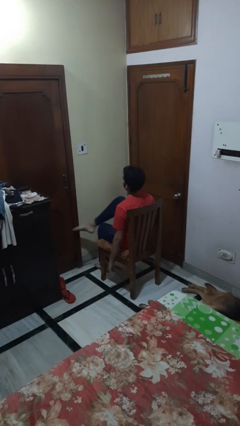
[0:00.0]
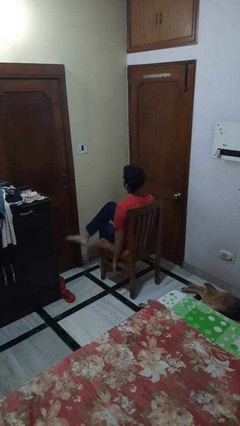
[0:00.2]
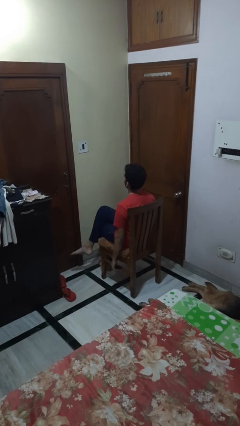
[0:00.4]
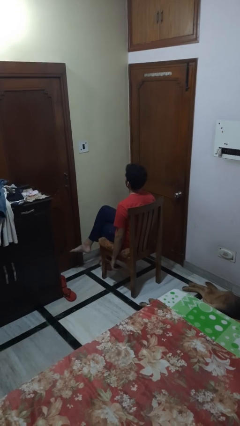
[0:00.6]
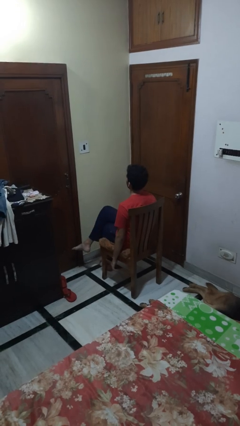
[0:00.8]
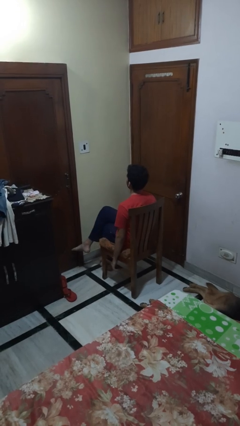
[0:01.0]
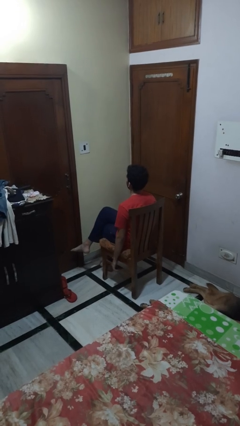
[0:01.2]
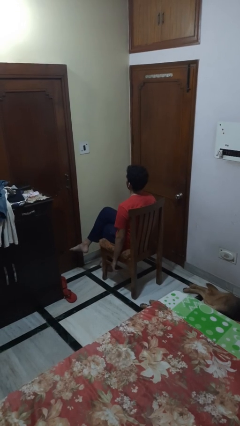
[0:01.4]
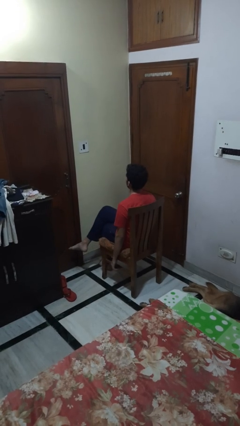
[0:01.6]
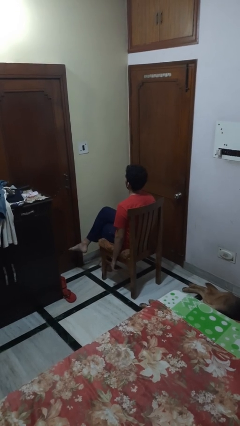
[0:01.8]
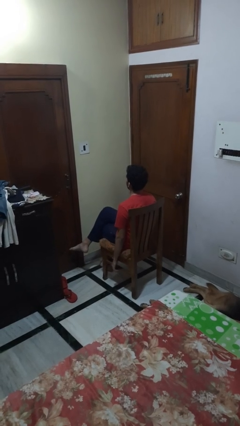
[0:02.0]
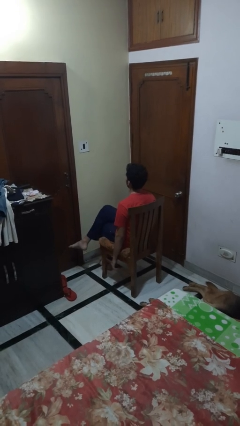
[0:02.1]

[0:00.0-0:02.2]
person crosses legs

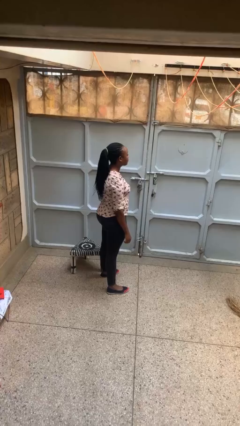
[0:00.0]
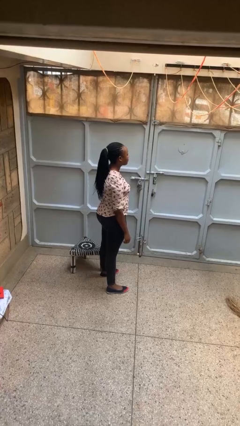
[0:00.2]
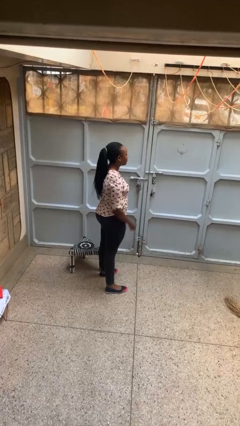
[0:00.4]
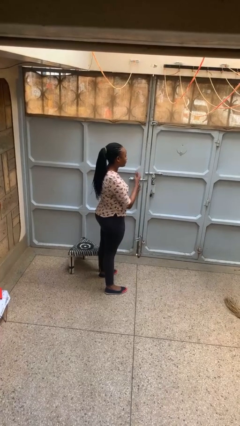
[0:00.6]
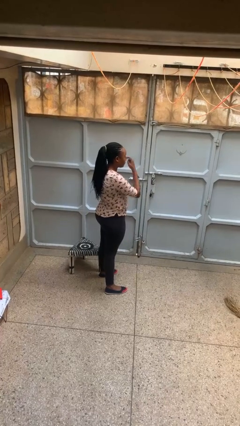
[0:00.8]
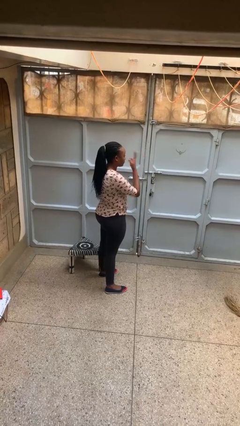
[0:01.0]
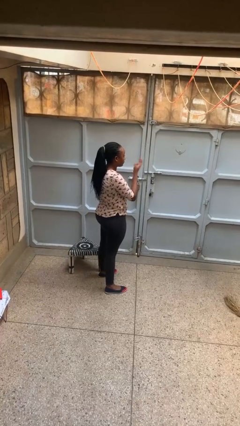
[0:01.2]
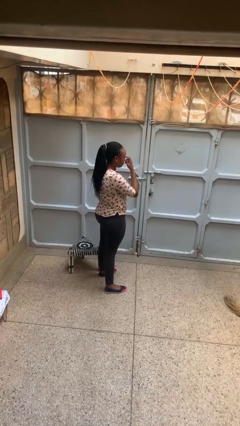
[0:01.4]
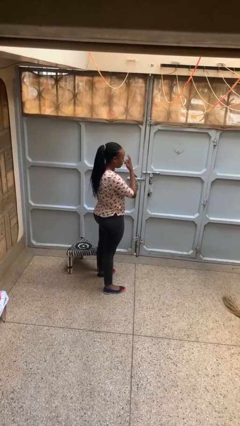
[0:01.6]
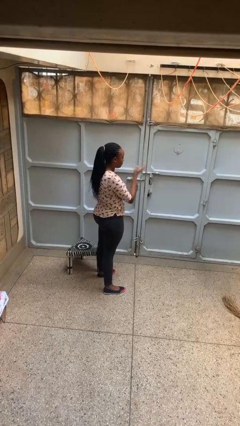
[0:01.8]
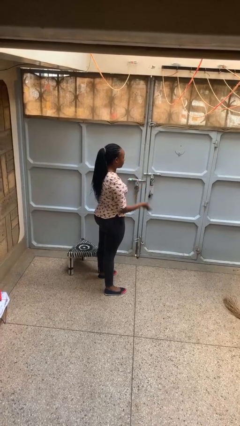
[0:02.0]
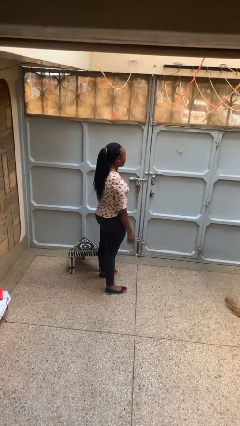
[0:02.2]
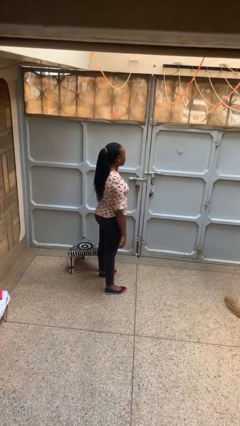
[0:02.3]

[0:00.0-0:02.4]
person gestures watch closely

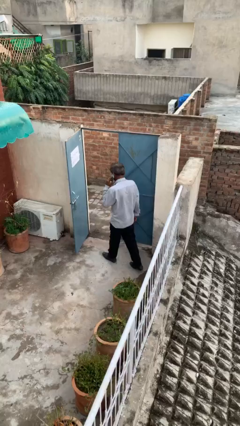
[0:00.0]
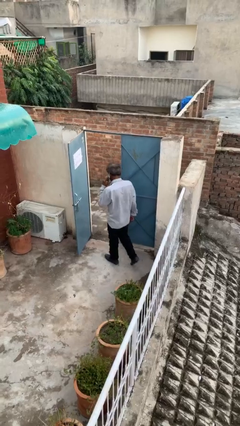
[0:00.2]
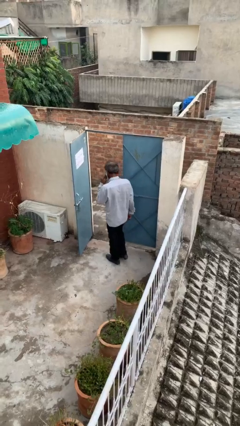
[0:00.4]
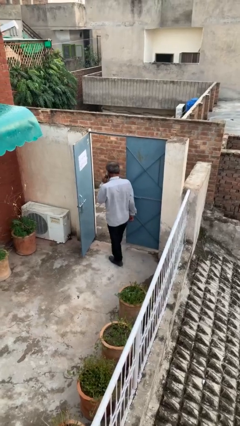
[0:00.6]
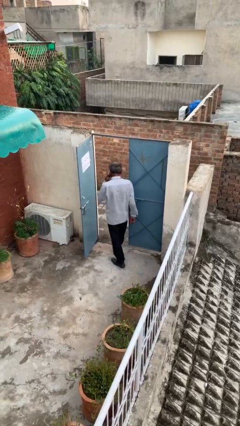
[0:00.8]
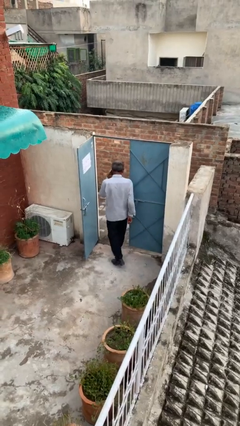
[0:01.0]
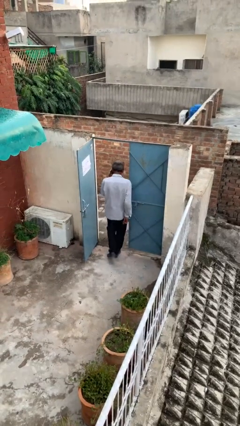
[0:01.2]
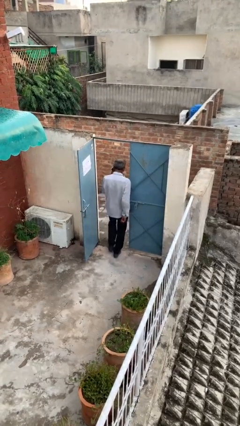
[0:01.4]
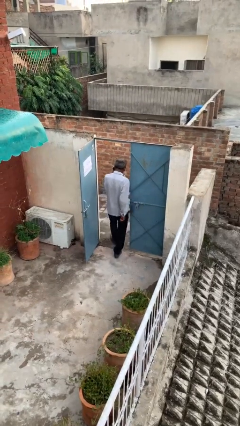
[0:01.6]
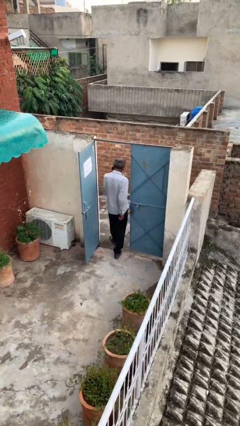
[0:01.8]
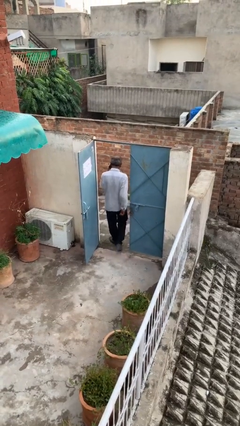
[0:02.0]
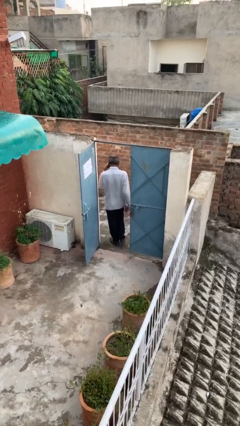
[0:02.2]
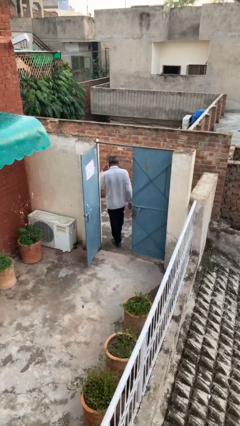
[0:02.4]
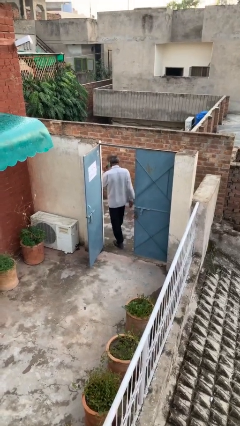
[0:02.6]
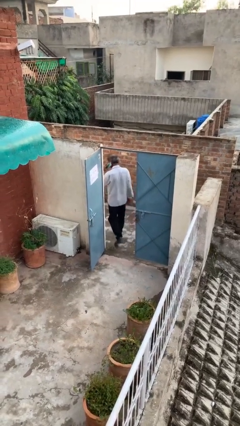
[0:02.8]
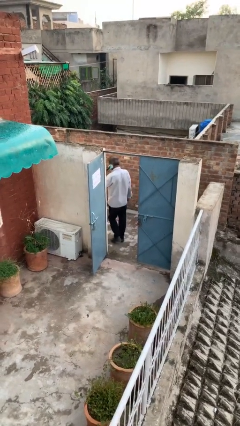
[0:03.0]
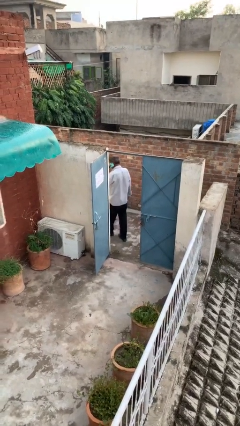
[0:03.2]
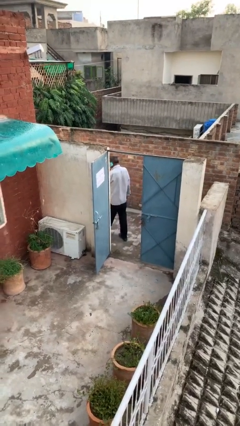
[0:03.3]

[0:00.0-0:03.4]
person exits scene through structure

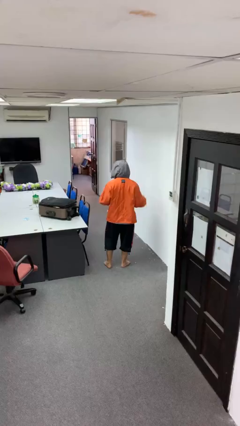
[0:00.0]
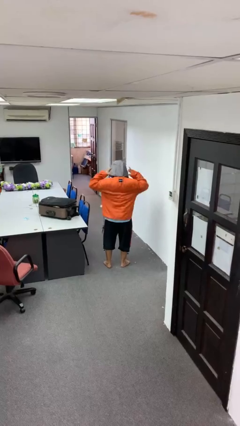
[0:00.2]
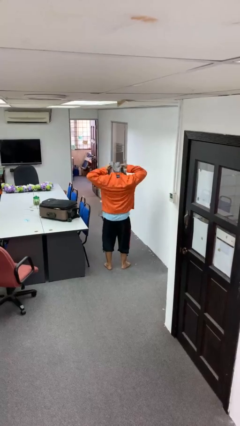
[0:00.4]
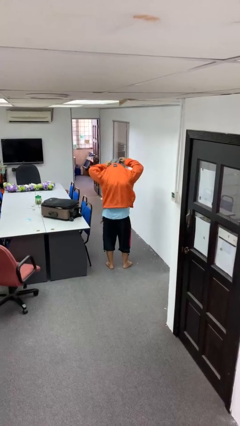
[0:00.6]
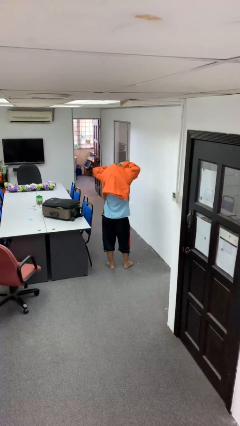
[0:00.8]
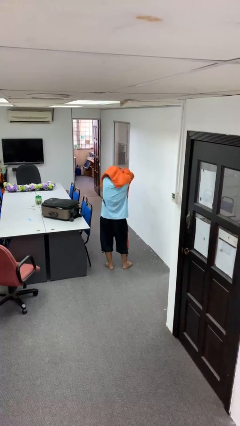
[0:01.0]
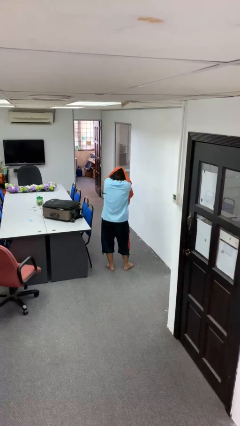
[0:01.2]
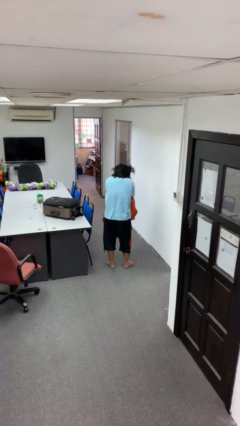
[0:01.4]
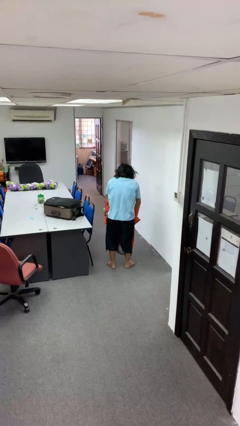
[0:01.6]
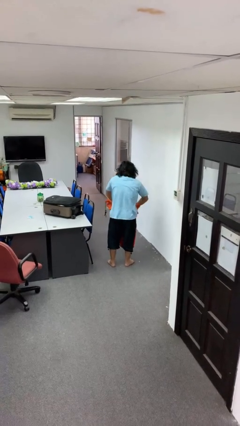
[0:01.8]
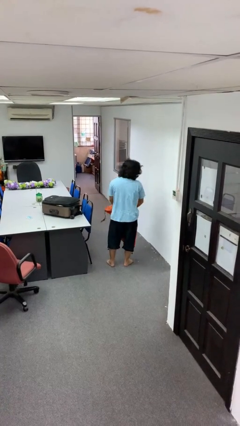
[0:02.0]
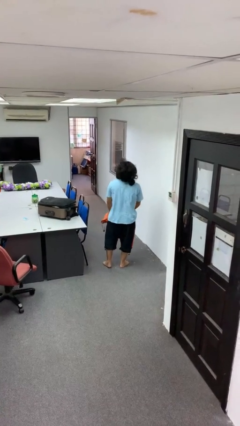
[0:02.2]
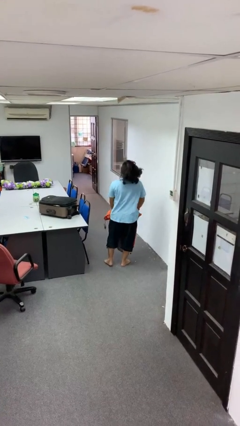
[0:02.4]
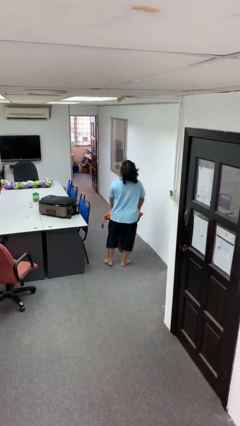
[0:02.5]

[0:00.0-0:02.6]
person takes off hoodie

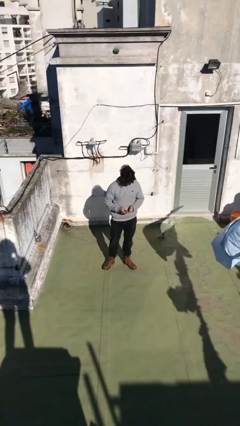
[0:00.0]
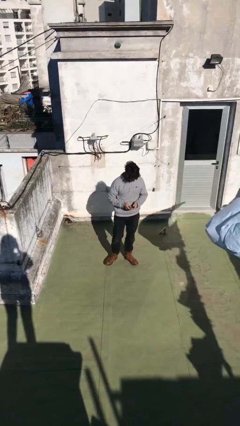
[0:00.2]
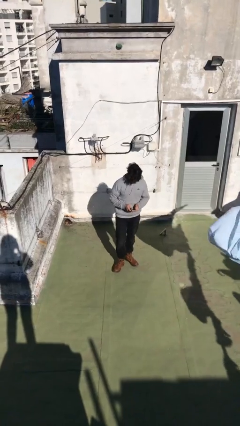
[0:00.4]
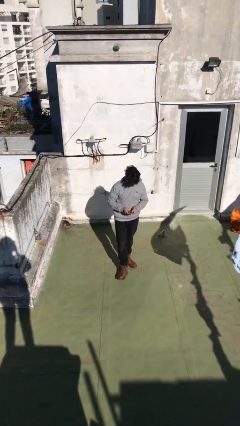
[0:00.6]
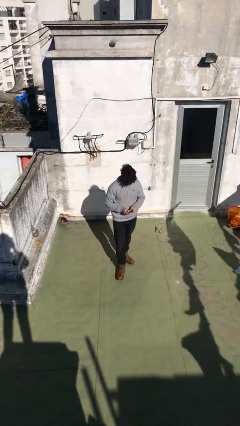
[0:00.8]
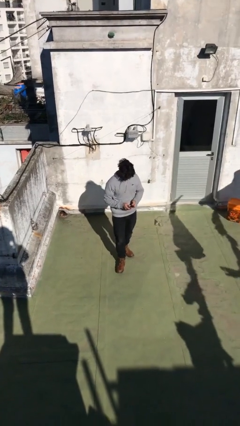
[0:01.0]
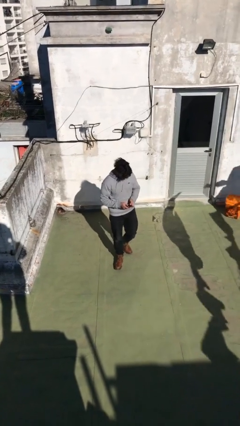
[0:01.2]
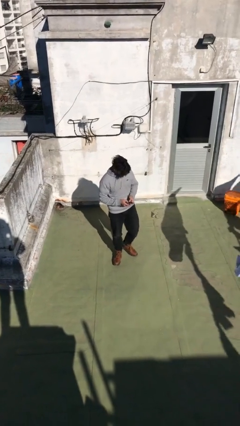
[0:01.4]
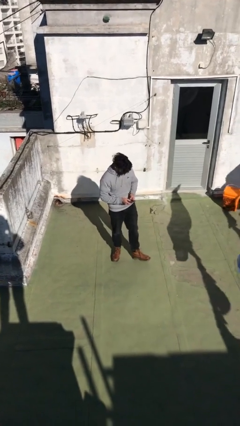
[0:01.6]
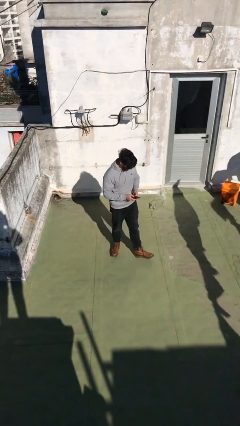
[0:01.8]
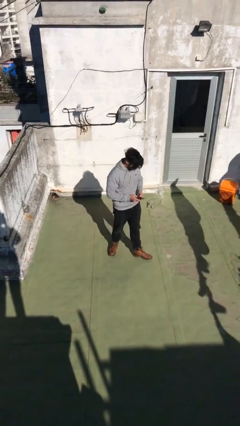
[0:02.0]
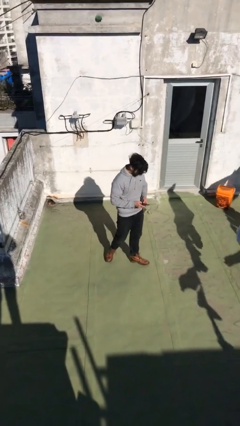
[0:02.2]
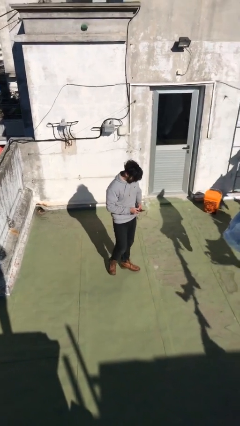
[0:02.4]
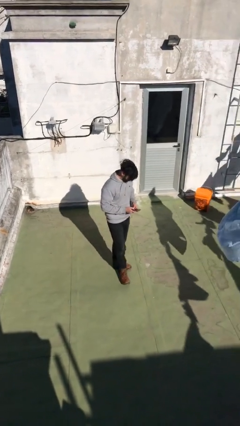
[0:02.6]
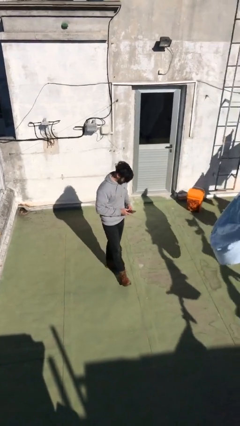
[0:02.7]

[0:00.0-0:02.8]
person texts on phone

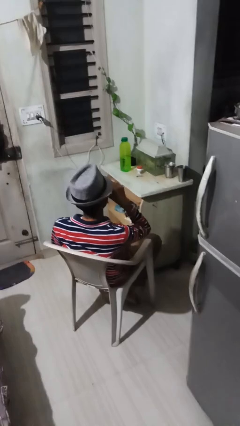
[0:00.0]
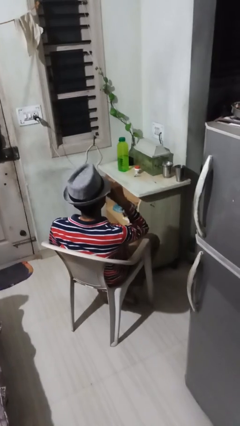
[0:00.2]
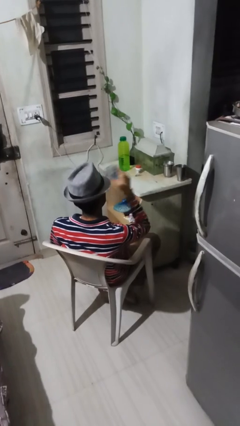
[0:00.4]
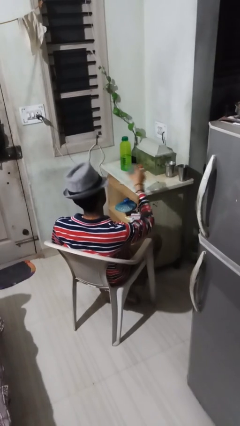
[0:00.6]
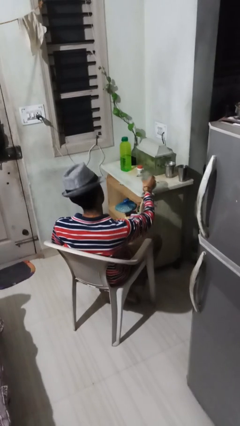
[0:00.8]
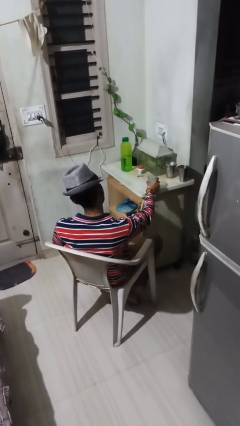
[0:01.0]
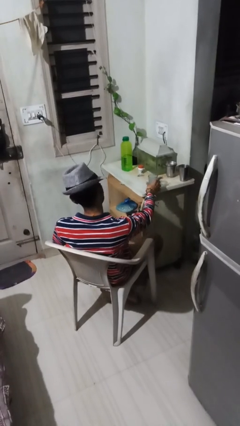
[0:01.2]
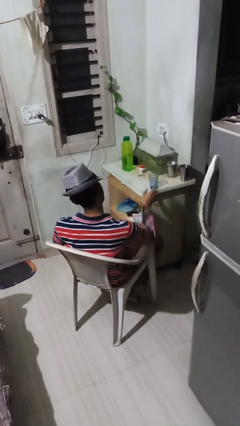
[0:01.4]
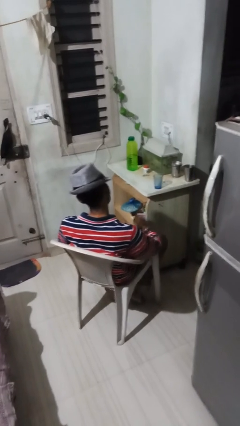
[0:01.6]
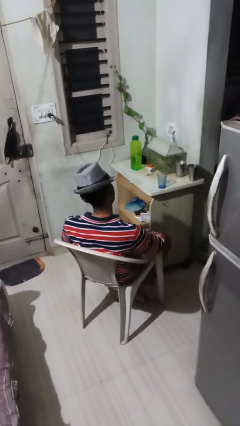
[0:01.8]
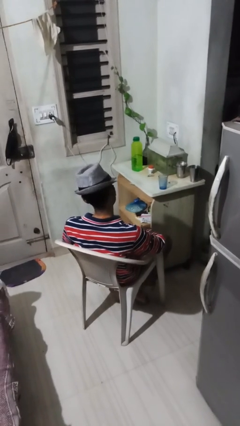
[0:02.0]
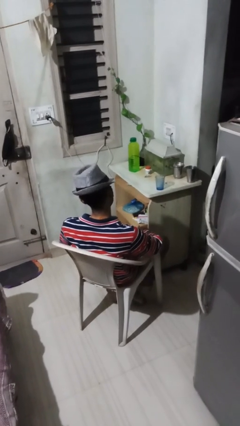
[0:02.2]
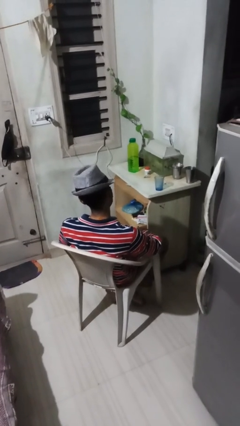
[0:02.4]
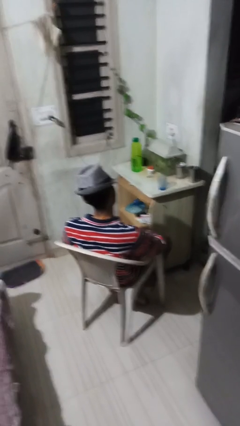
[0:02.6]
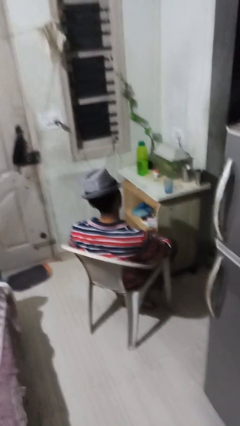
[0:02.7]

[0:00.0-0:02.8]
person puts down object on table

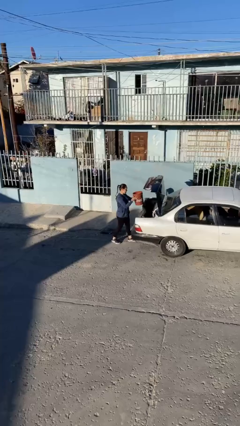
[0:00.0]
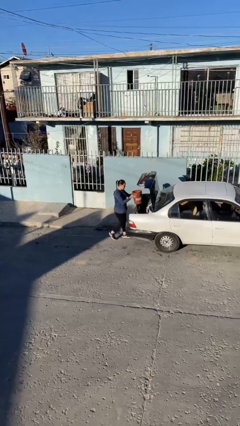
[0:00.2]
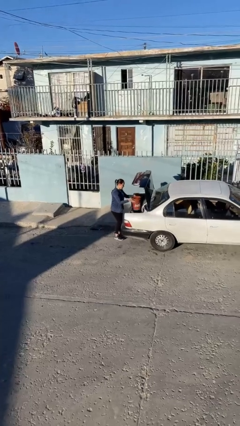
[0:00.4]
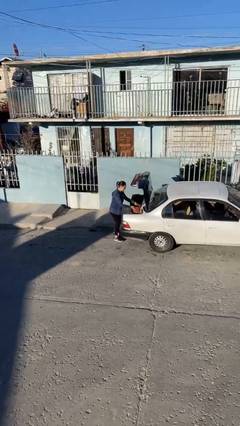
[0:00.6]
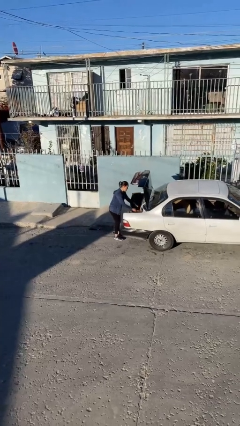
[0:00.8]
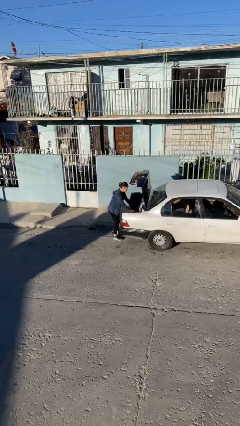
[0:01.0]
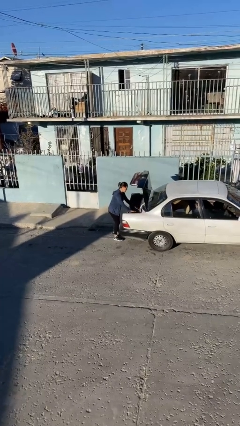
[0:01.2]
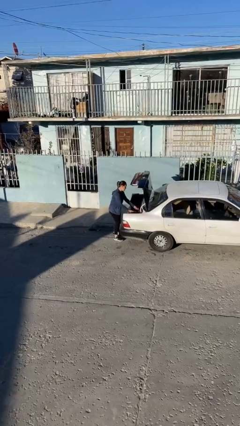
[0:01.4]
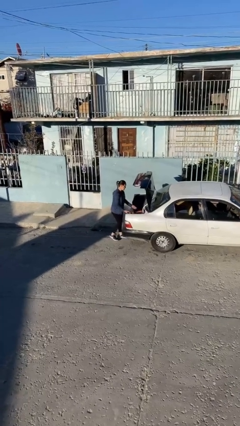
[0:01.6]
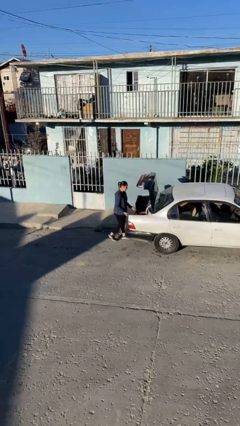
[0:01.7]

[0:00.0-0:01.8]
person loads car
